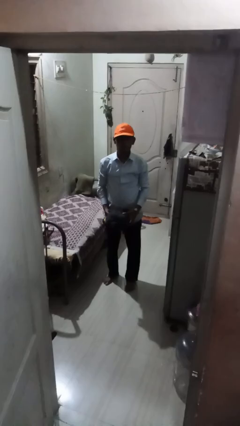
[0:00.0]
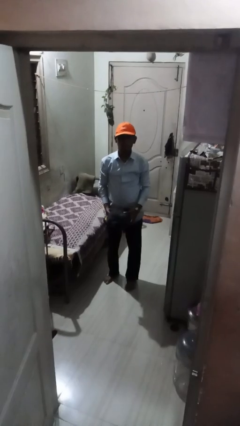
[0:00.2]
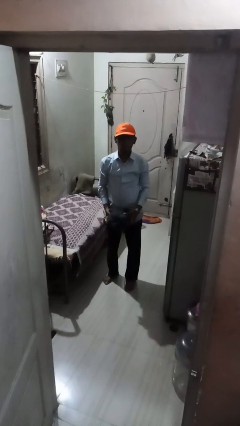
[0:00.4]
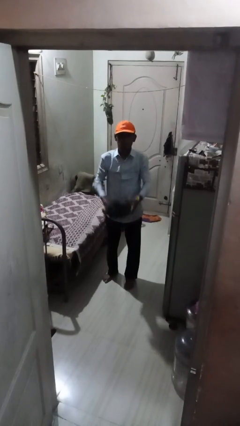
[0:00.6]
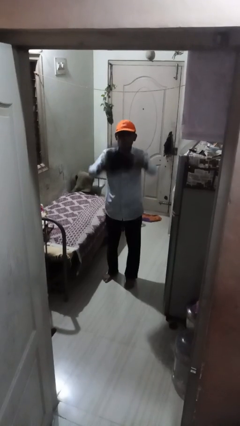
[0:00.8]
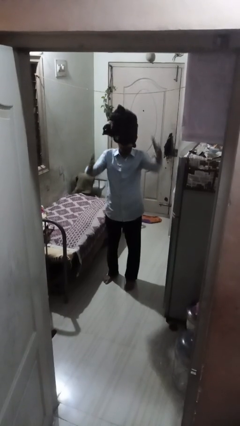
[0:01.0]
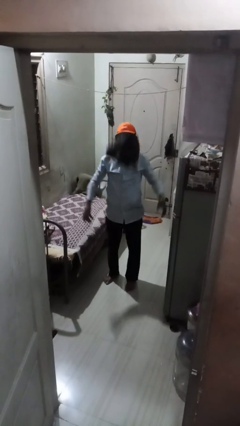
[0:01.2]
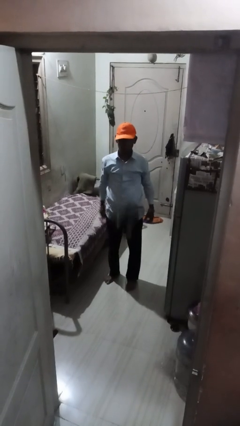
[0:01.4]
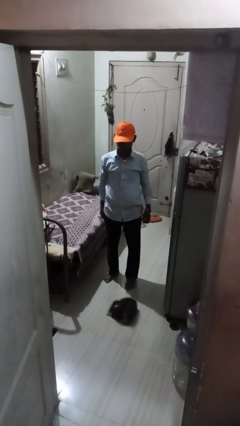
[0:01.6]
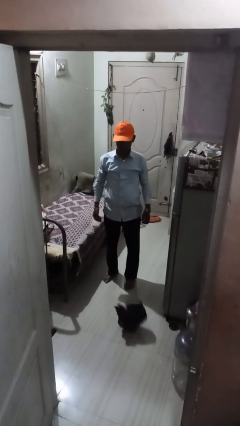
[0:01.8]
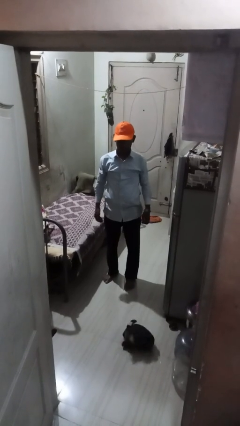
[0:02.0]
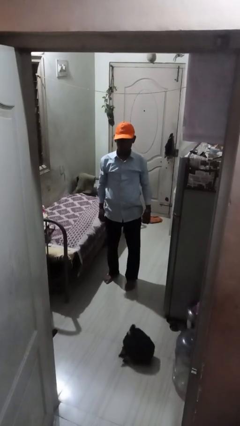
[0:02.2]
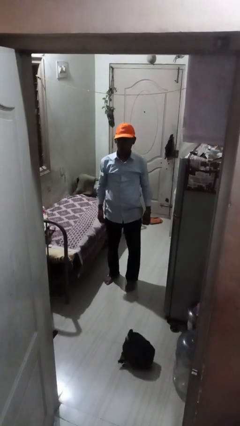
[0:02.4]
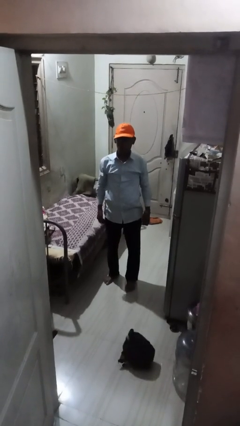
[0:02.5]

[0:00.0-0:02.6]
person throws object into air

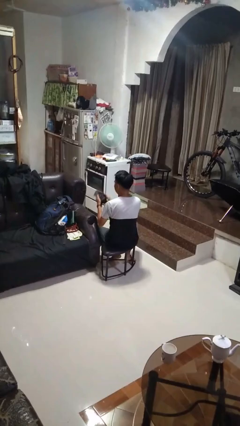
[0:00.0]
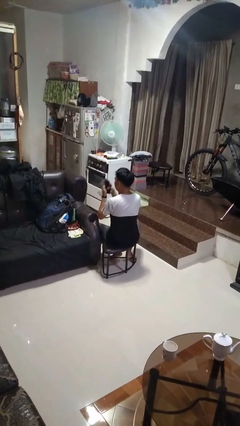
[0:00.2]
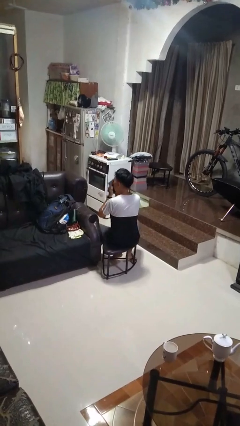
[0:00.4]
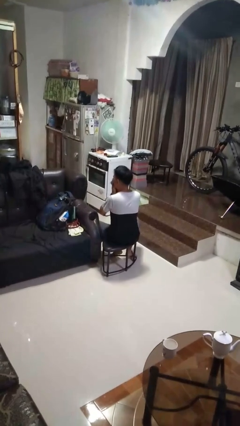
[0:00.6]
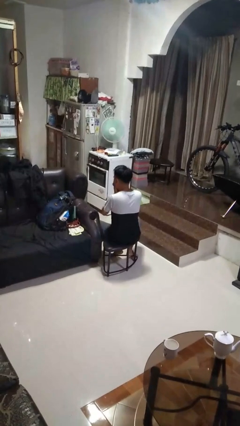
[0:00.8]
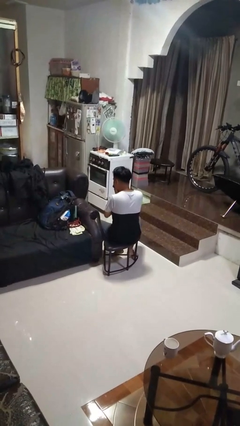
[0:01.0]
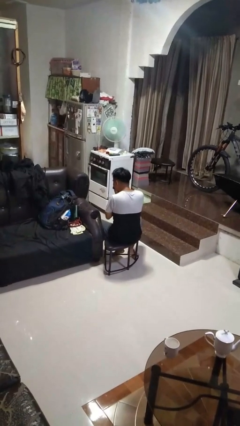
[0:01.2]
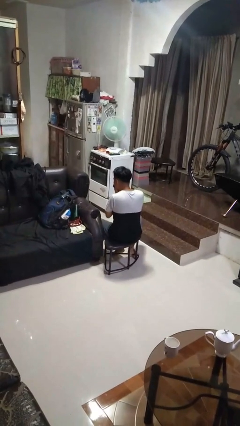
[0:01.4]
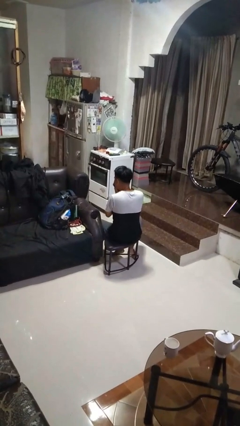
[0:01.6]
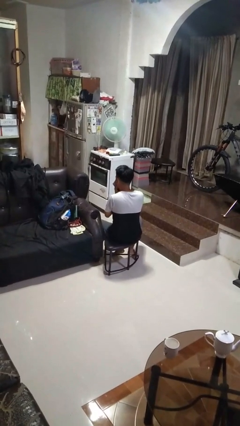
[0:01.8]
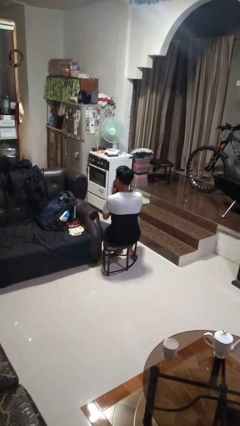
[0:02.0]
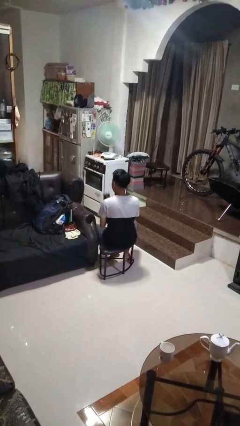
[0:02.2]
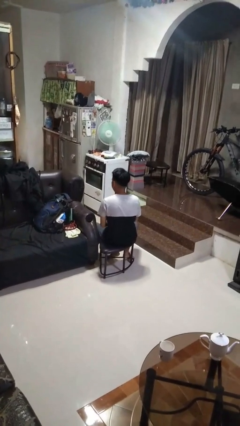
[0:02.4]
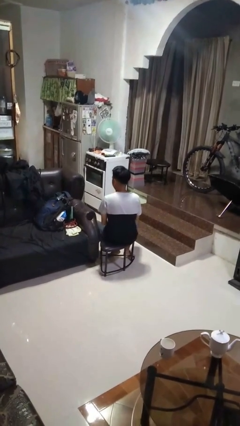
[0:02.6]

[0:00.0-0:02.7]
person blows nose

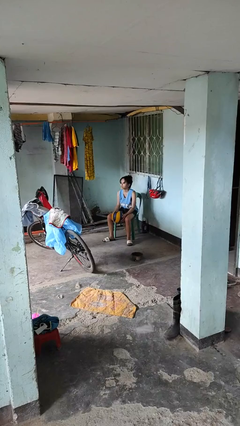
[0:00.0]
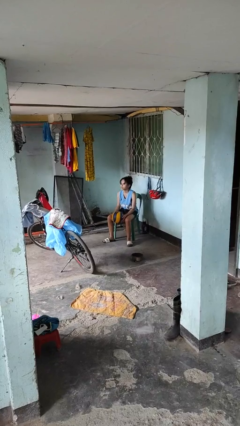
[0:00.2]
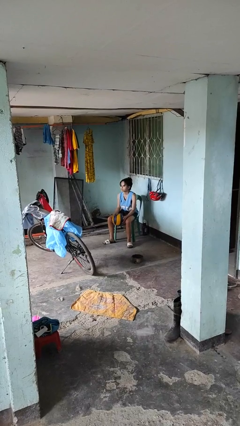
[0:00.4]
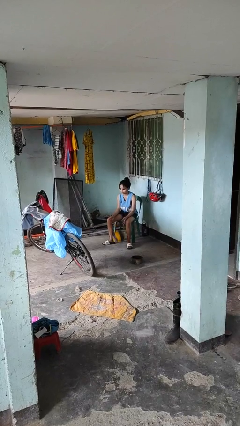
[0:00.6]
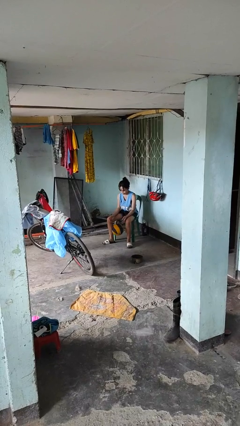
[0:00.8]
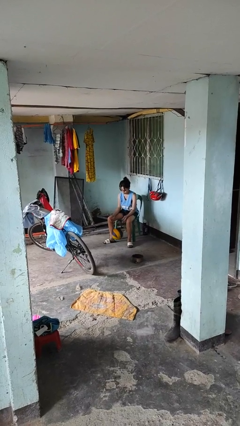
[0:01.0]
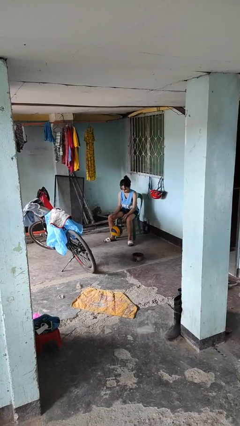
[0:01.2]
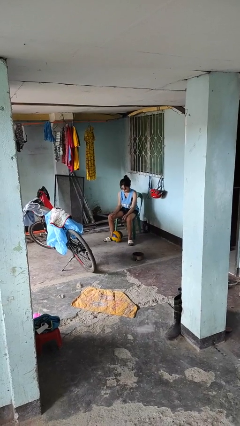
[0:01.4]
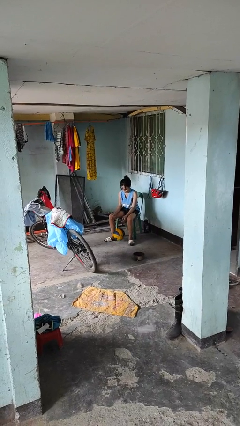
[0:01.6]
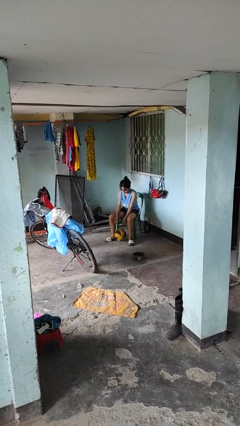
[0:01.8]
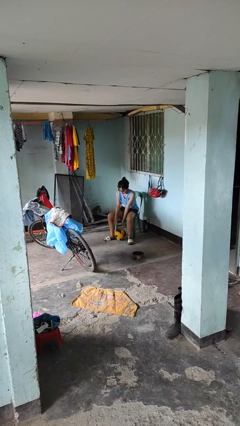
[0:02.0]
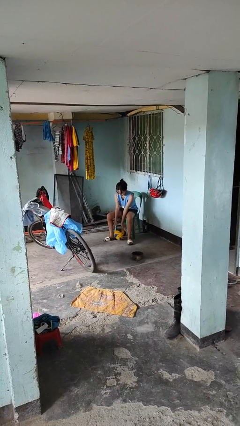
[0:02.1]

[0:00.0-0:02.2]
person drops object

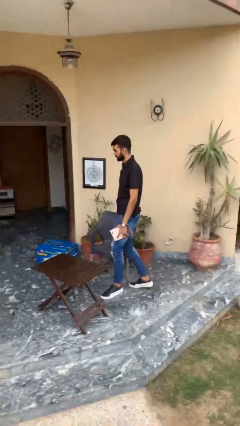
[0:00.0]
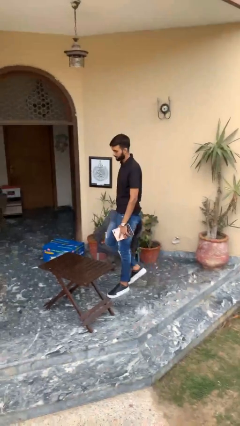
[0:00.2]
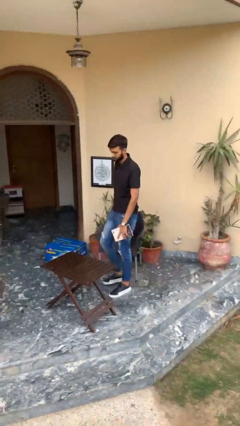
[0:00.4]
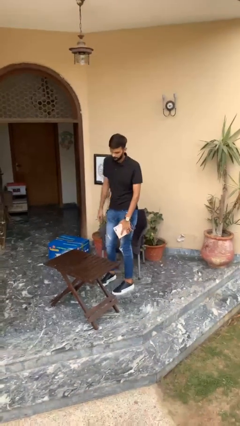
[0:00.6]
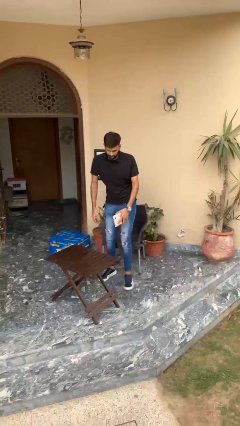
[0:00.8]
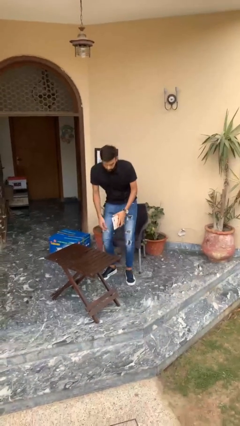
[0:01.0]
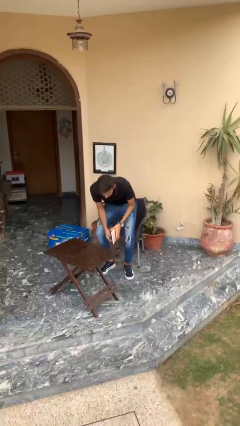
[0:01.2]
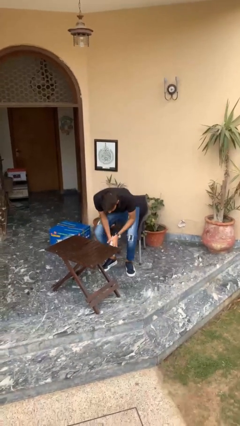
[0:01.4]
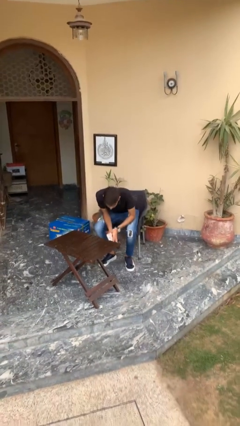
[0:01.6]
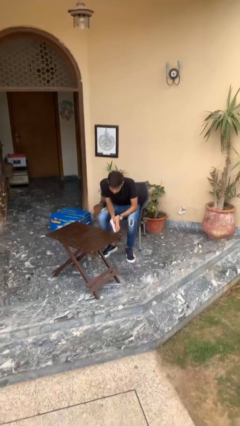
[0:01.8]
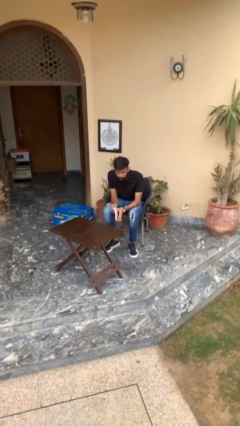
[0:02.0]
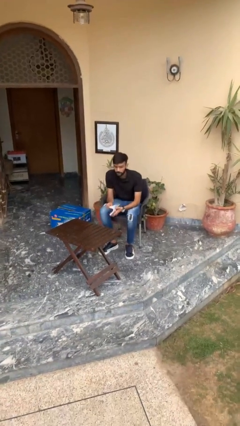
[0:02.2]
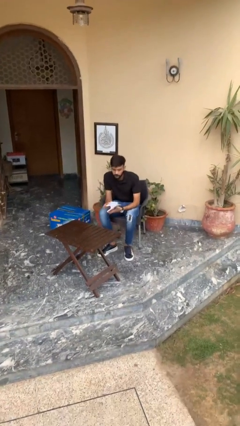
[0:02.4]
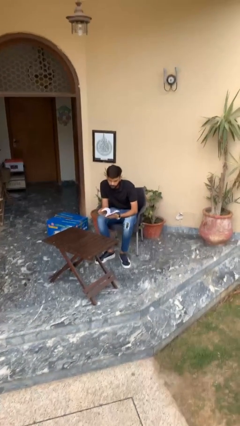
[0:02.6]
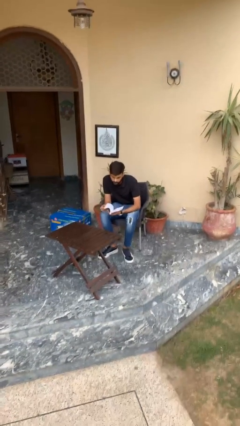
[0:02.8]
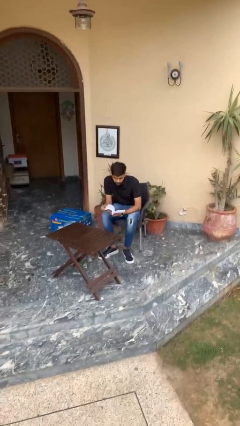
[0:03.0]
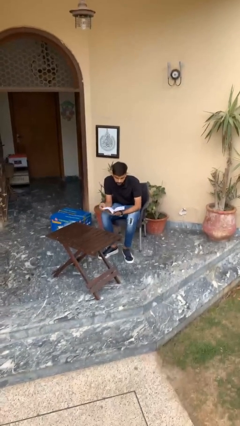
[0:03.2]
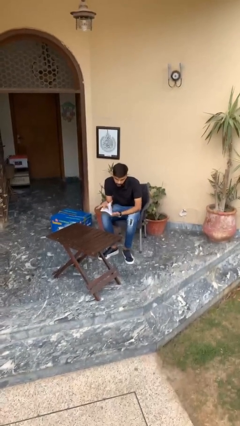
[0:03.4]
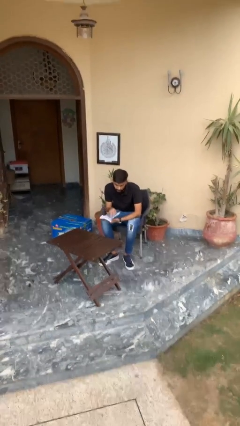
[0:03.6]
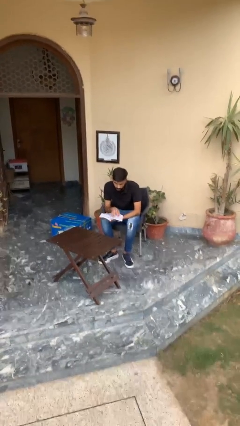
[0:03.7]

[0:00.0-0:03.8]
person sits down

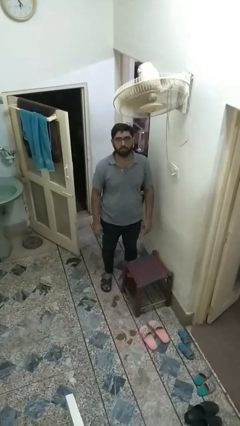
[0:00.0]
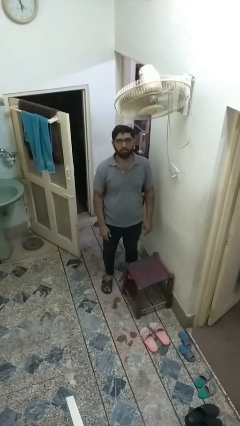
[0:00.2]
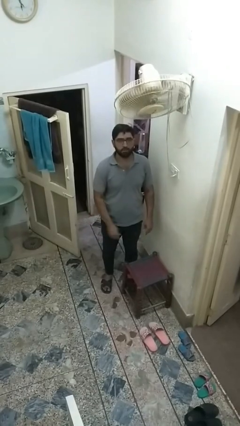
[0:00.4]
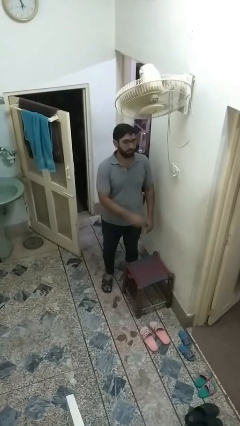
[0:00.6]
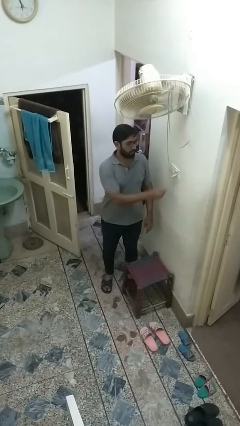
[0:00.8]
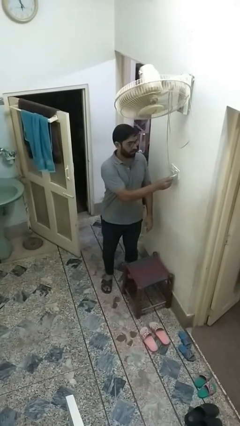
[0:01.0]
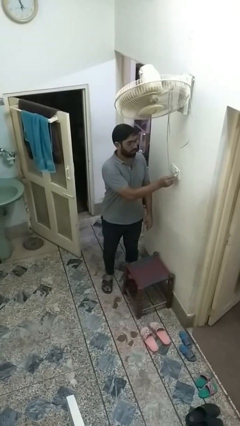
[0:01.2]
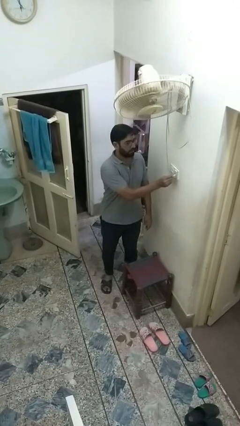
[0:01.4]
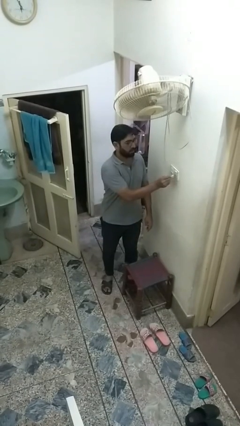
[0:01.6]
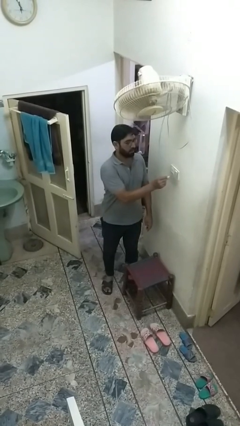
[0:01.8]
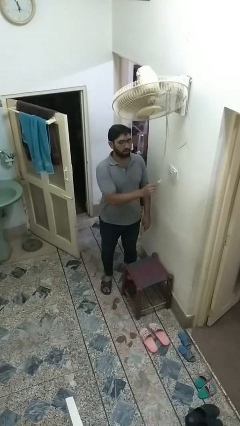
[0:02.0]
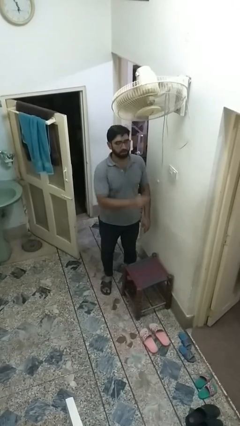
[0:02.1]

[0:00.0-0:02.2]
person unplugs from electrical socket

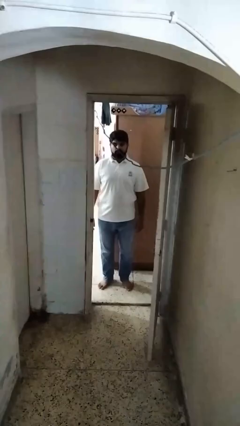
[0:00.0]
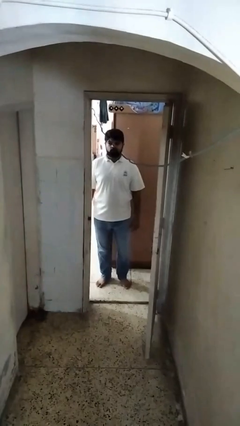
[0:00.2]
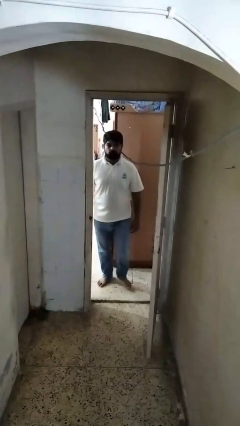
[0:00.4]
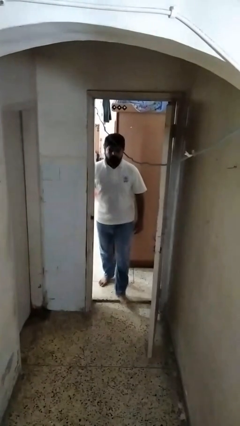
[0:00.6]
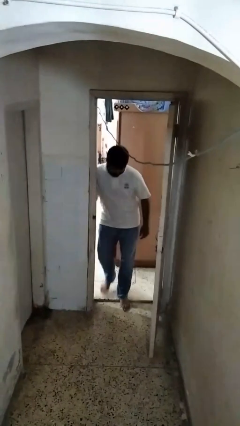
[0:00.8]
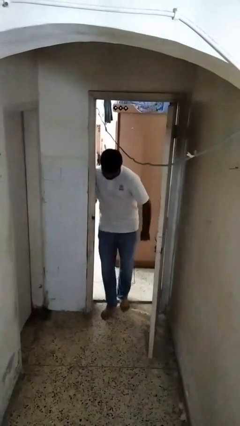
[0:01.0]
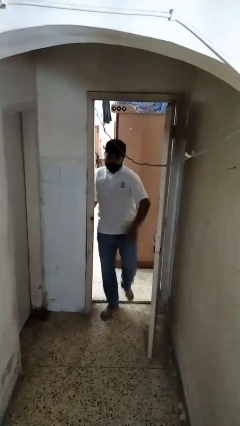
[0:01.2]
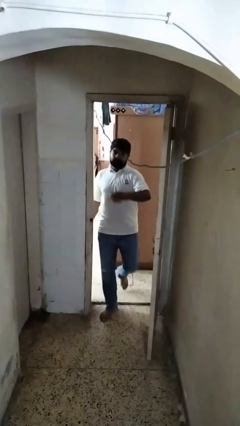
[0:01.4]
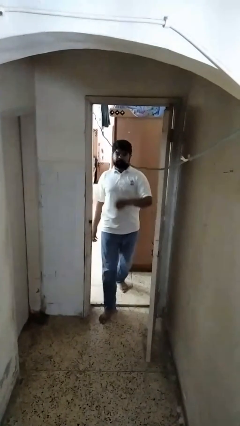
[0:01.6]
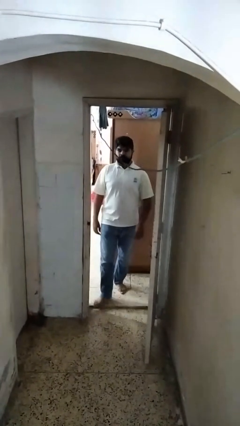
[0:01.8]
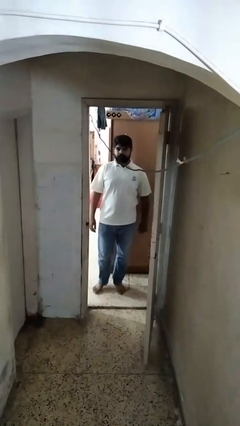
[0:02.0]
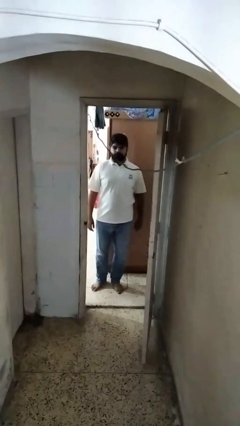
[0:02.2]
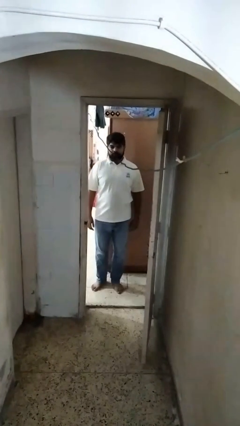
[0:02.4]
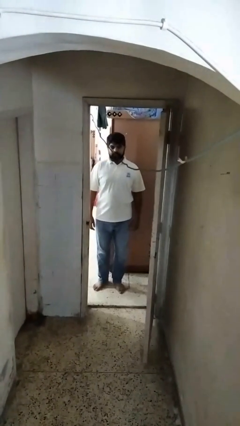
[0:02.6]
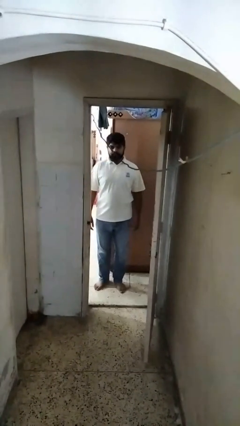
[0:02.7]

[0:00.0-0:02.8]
person bumps into wall

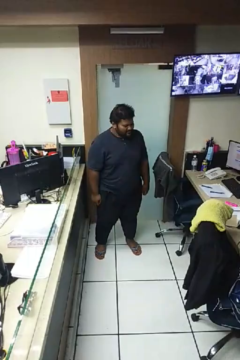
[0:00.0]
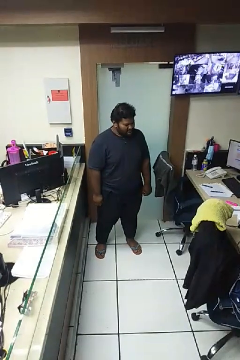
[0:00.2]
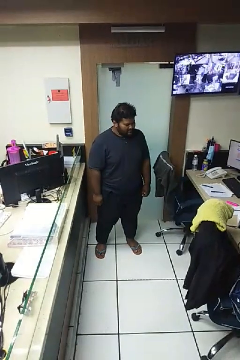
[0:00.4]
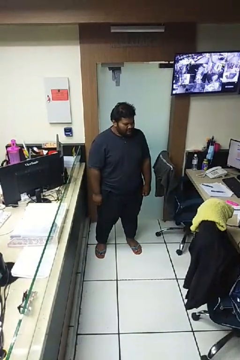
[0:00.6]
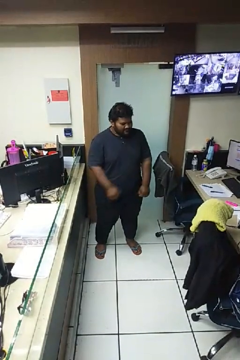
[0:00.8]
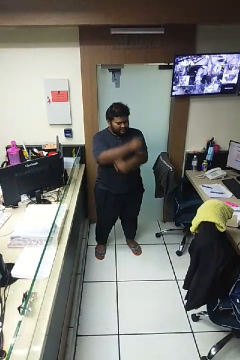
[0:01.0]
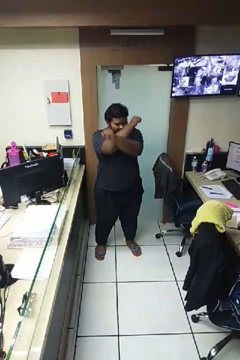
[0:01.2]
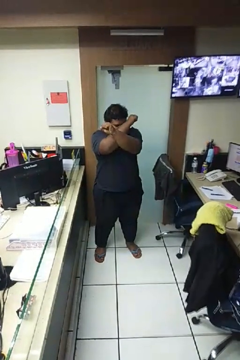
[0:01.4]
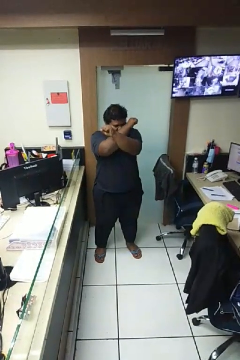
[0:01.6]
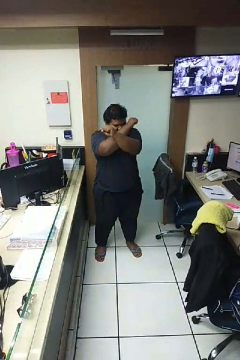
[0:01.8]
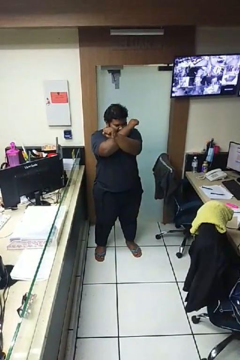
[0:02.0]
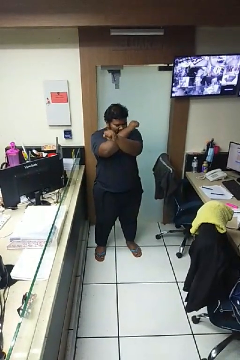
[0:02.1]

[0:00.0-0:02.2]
person gestures arms x
